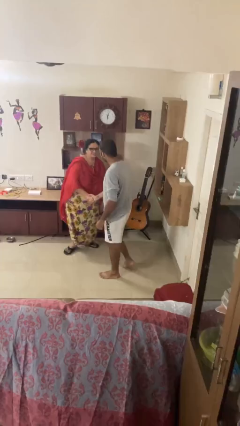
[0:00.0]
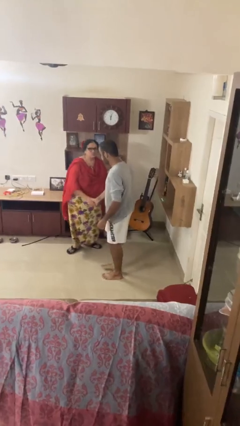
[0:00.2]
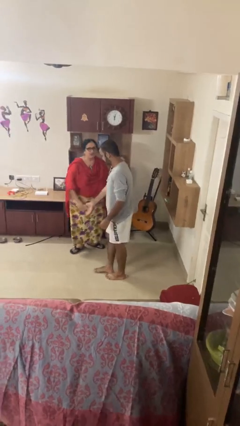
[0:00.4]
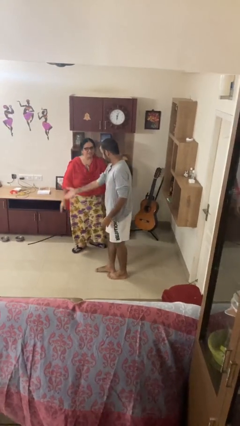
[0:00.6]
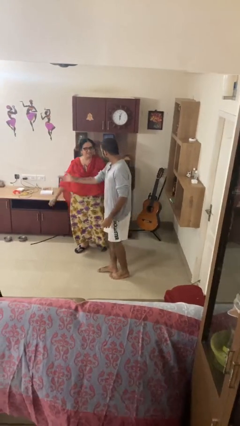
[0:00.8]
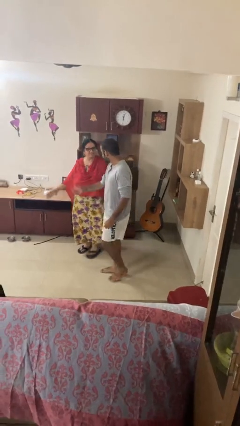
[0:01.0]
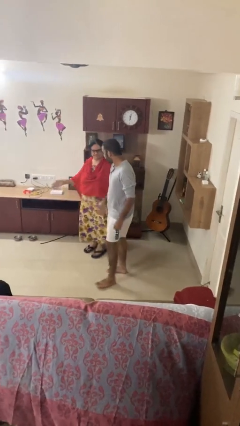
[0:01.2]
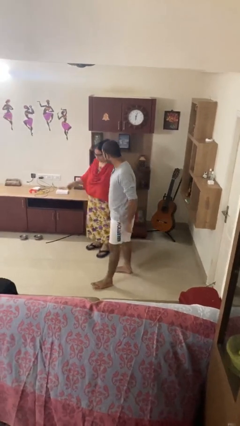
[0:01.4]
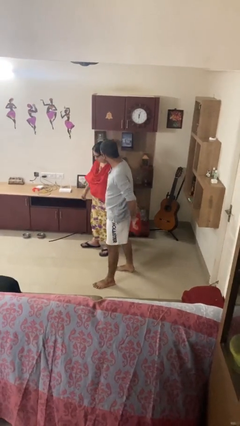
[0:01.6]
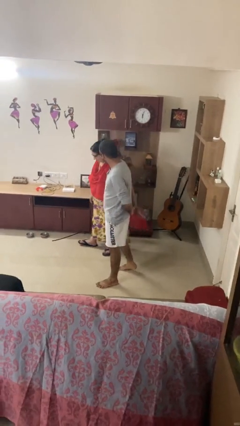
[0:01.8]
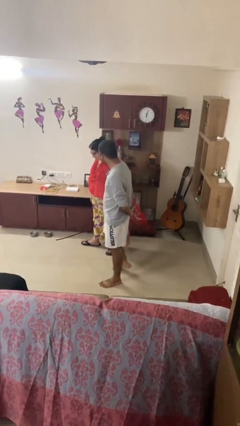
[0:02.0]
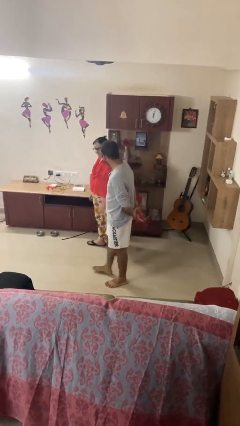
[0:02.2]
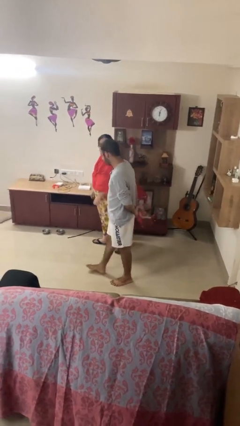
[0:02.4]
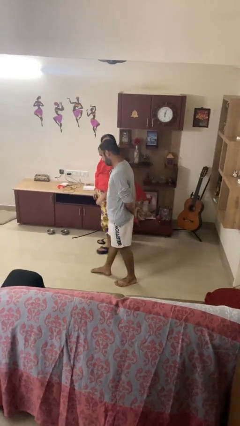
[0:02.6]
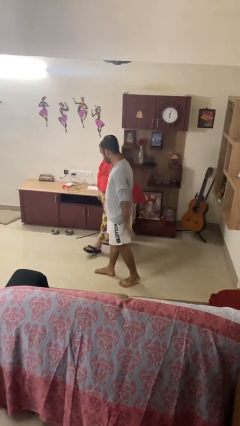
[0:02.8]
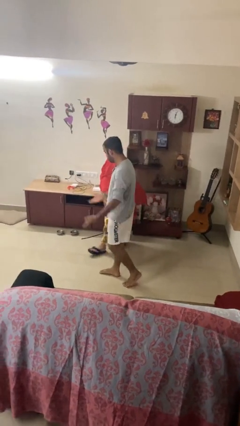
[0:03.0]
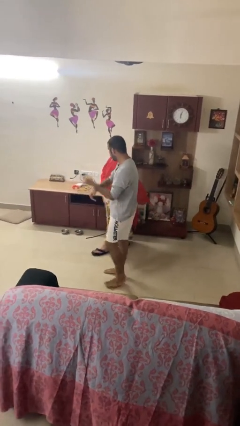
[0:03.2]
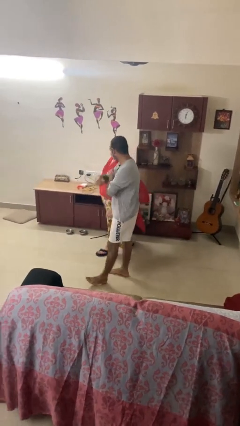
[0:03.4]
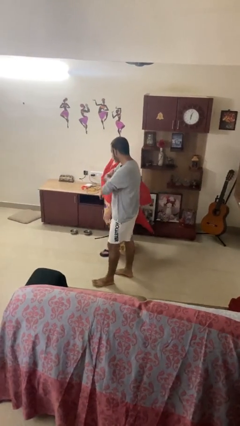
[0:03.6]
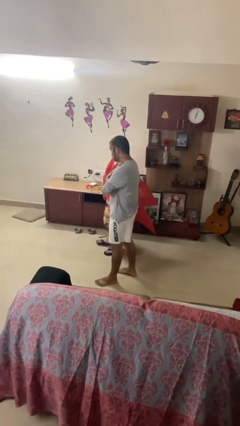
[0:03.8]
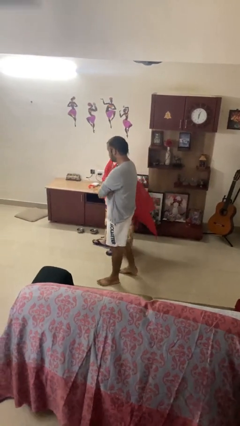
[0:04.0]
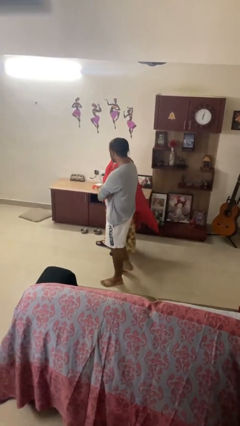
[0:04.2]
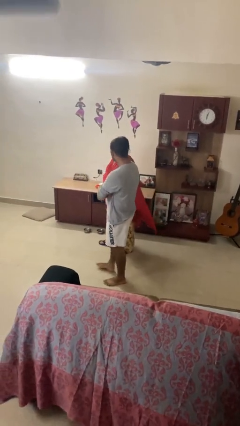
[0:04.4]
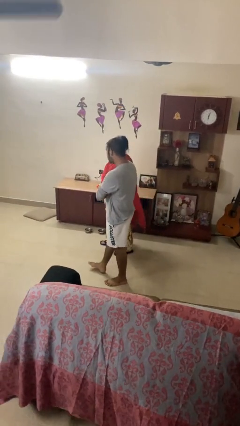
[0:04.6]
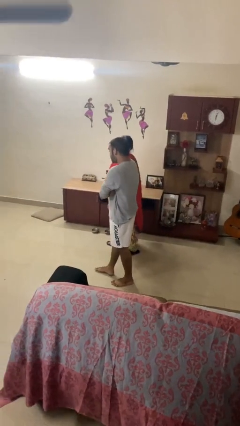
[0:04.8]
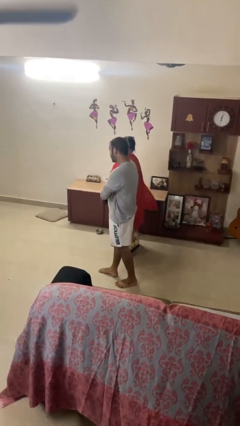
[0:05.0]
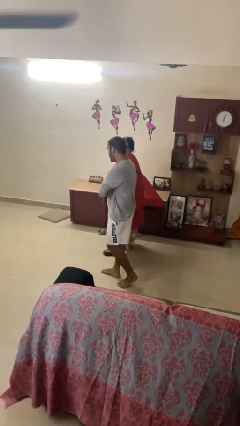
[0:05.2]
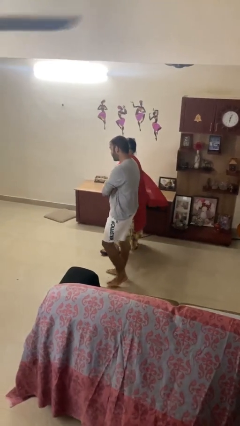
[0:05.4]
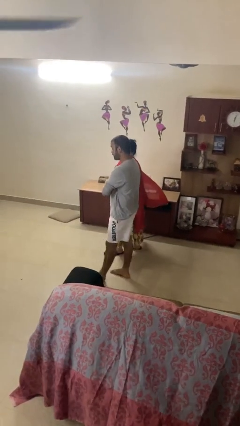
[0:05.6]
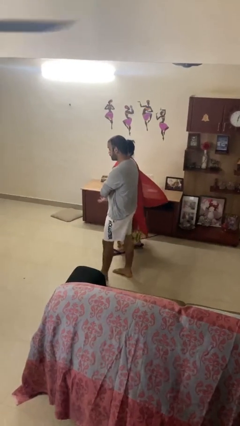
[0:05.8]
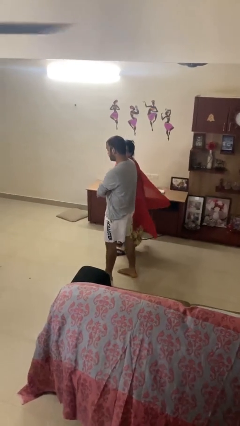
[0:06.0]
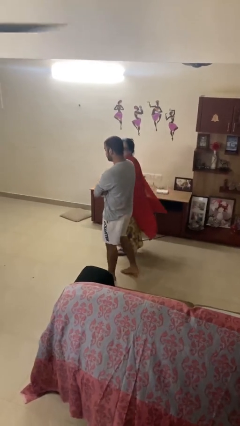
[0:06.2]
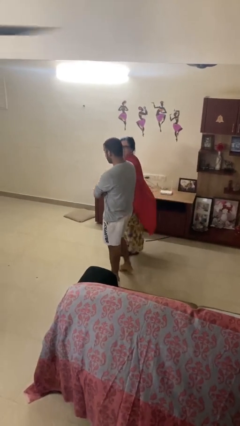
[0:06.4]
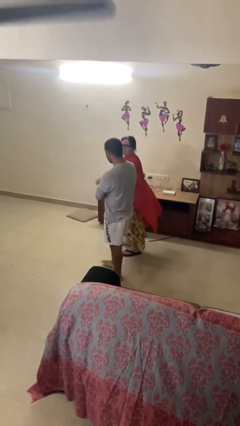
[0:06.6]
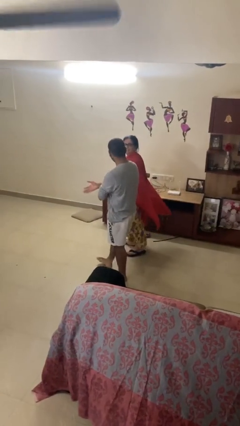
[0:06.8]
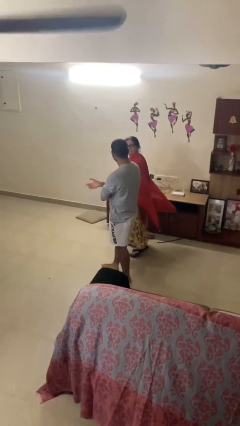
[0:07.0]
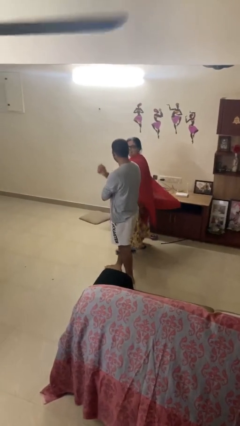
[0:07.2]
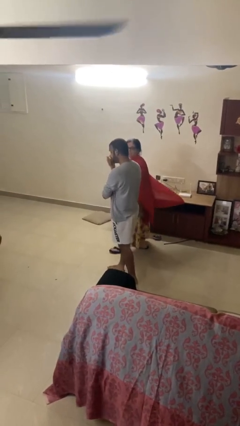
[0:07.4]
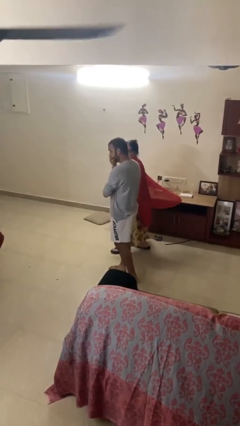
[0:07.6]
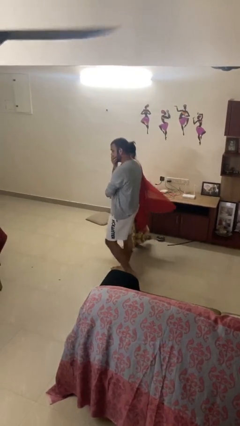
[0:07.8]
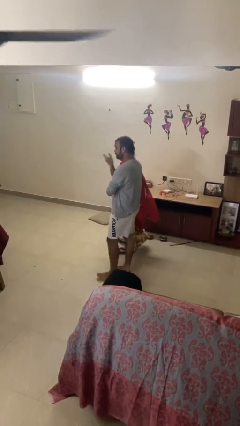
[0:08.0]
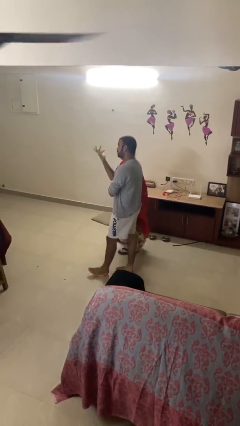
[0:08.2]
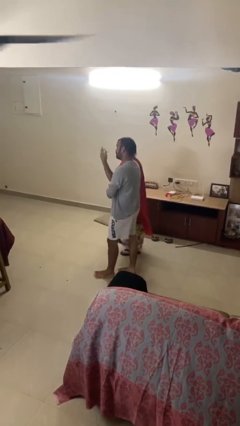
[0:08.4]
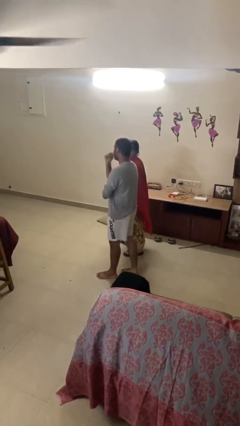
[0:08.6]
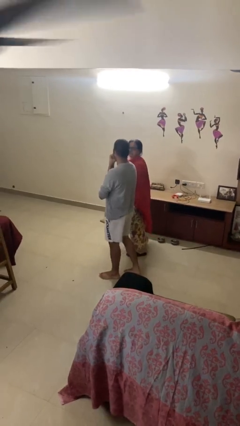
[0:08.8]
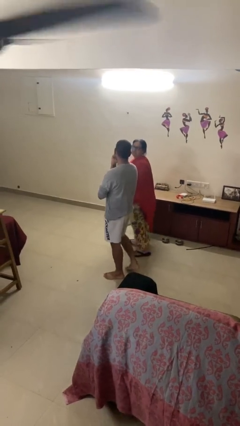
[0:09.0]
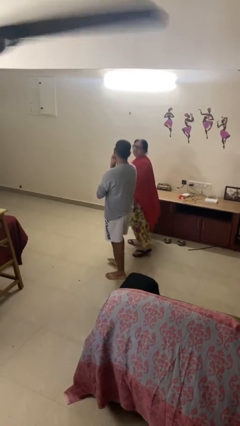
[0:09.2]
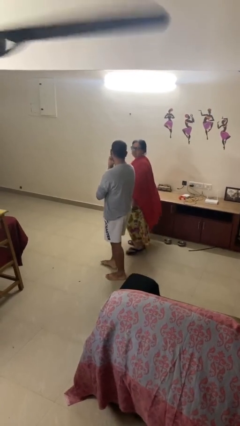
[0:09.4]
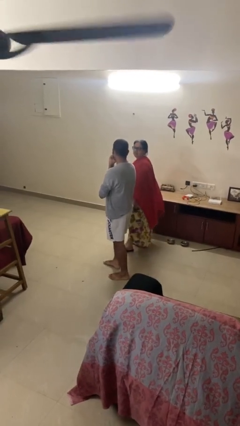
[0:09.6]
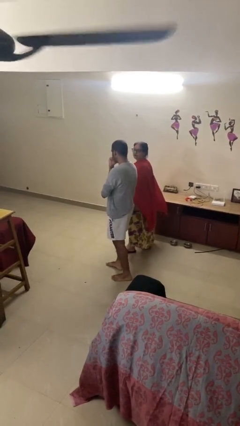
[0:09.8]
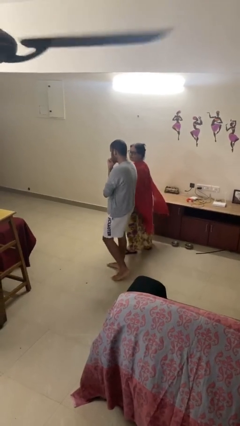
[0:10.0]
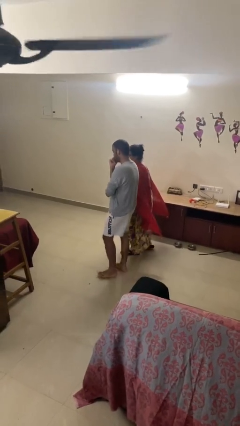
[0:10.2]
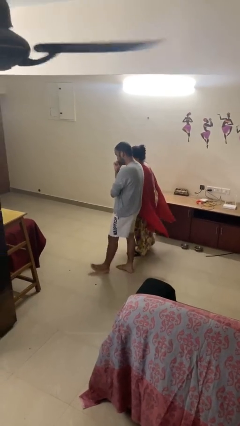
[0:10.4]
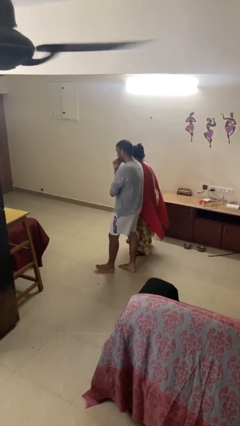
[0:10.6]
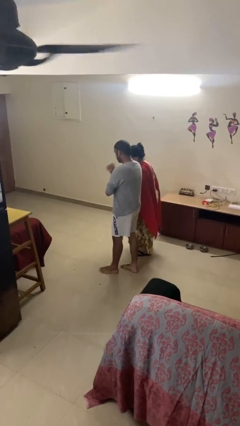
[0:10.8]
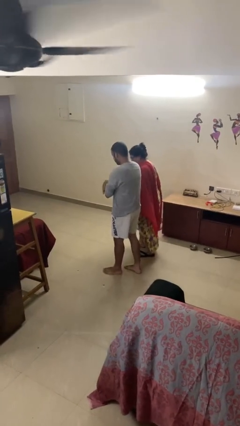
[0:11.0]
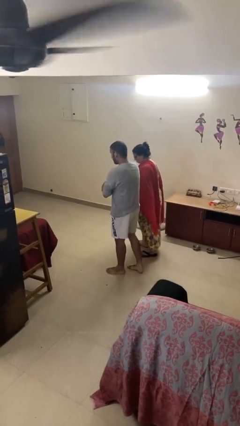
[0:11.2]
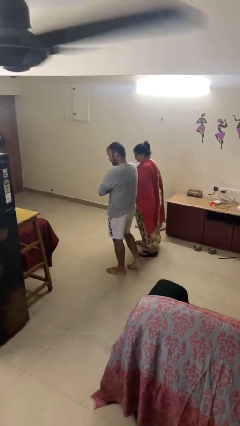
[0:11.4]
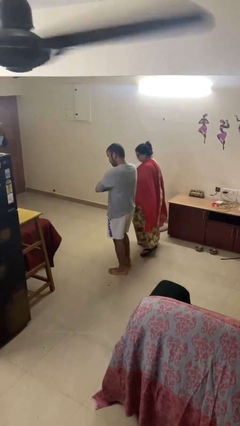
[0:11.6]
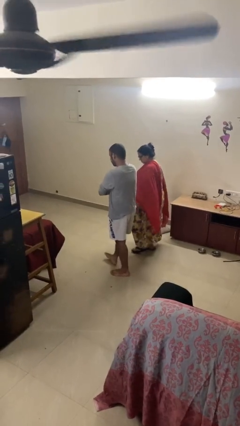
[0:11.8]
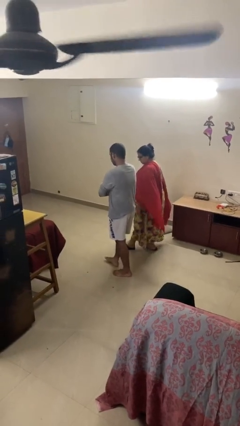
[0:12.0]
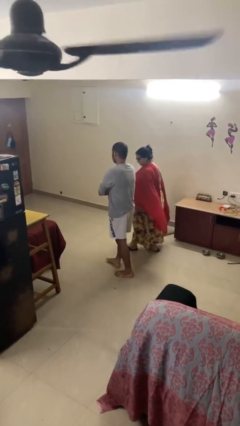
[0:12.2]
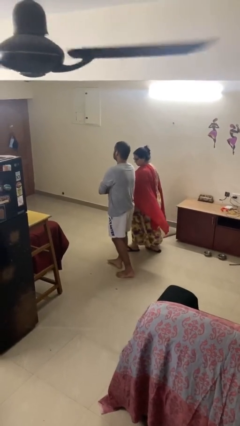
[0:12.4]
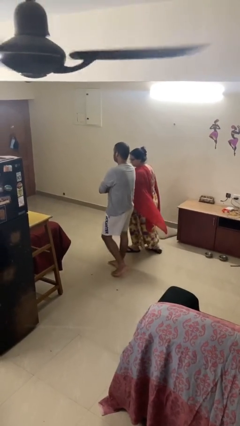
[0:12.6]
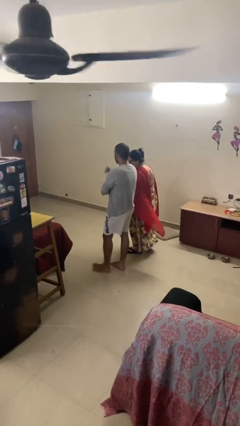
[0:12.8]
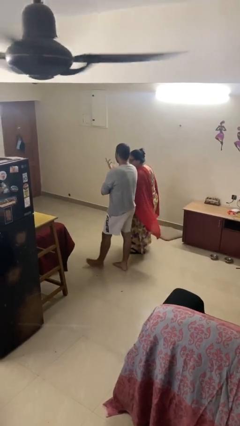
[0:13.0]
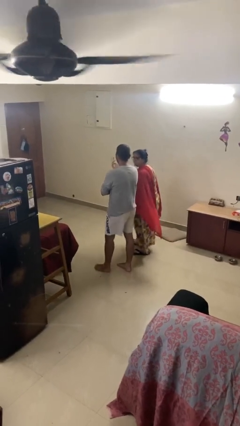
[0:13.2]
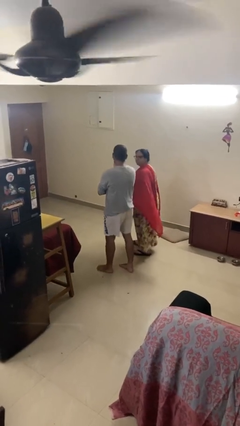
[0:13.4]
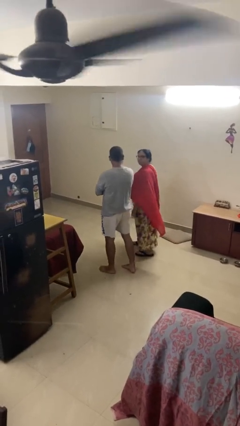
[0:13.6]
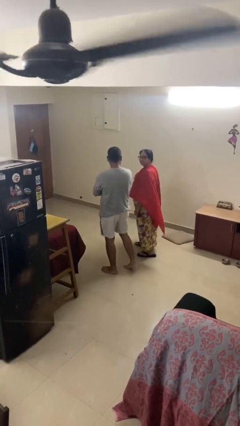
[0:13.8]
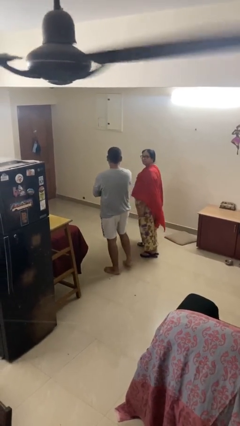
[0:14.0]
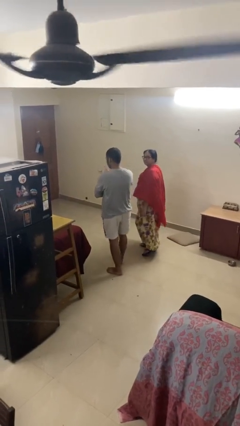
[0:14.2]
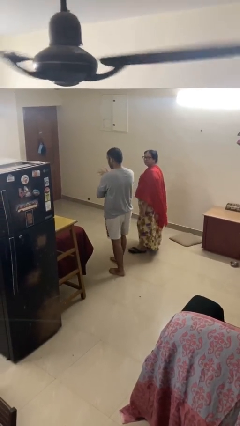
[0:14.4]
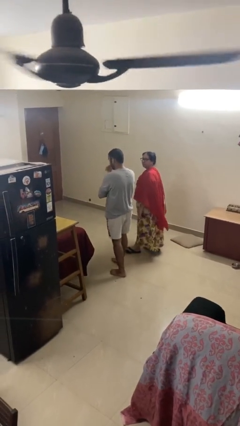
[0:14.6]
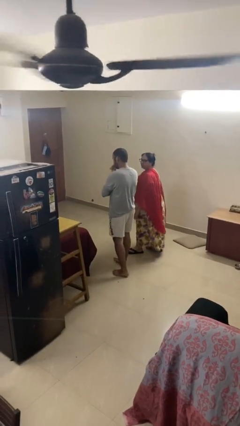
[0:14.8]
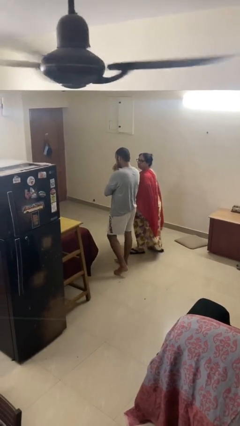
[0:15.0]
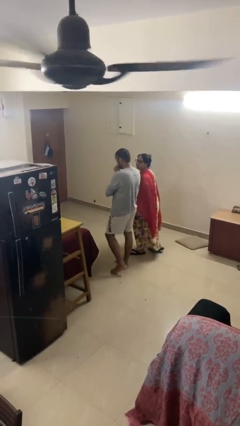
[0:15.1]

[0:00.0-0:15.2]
person talks to person

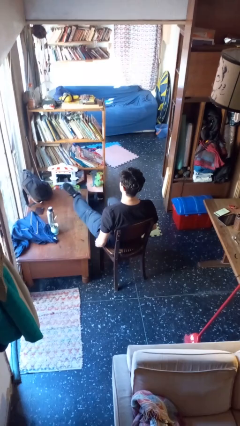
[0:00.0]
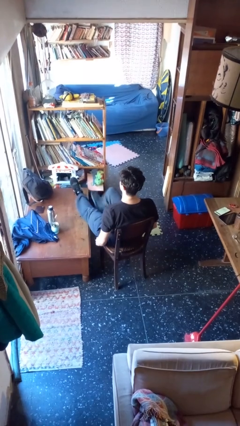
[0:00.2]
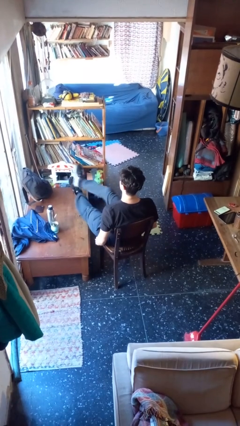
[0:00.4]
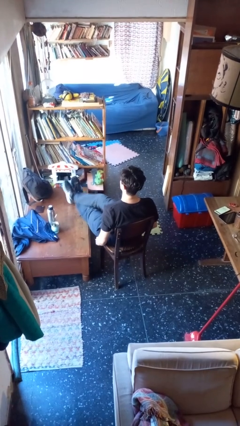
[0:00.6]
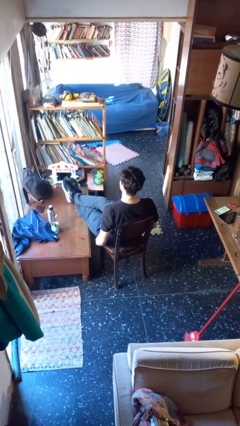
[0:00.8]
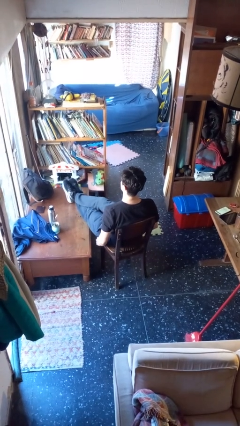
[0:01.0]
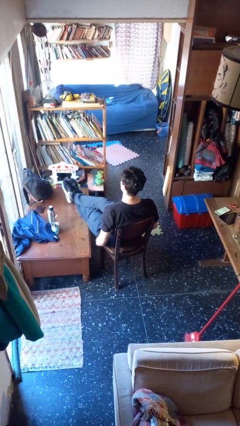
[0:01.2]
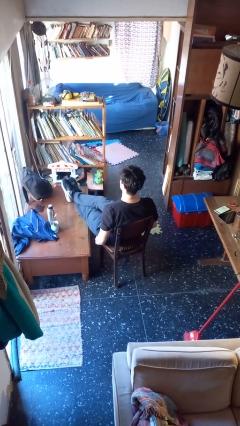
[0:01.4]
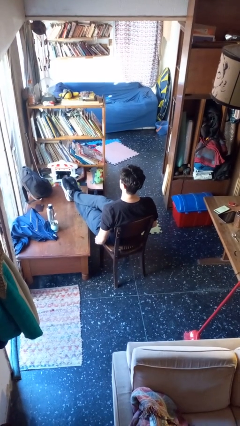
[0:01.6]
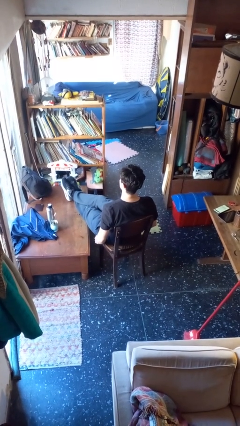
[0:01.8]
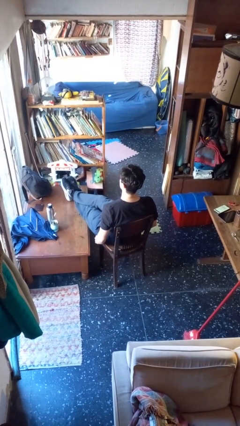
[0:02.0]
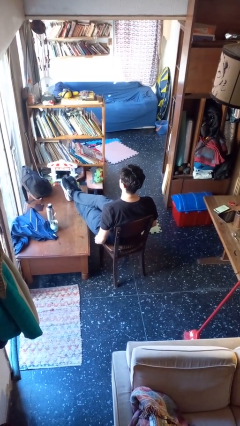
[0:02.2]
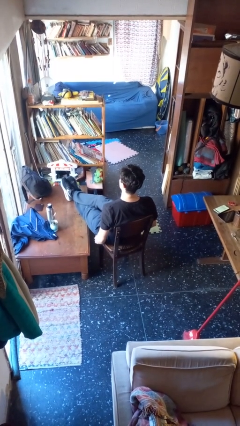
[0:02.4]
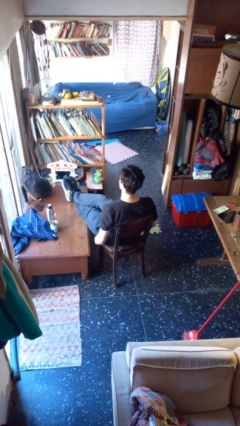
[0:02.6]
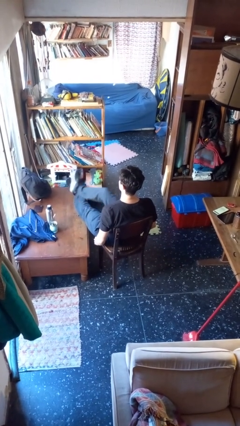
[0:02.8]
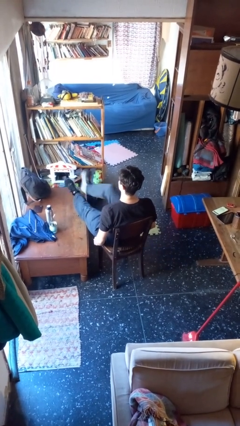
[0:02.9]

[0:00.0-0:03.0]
person puts feet up

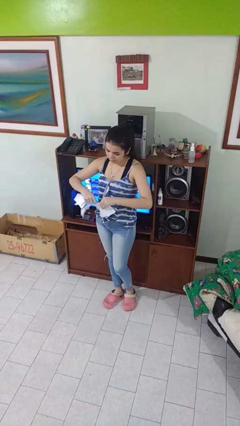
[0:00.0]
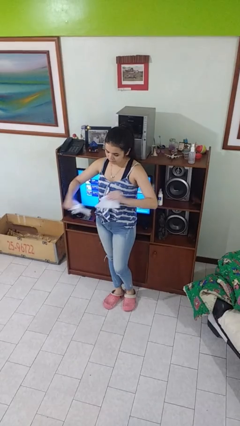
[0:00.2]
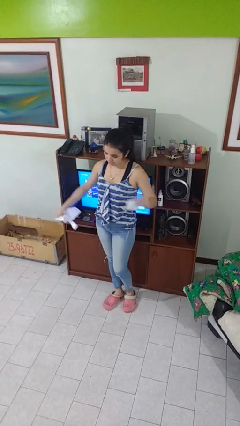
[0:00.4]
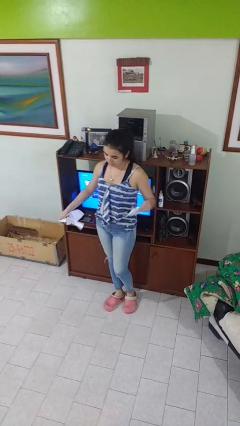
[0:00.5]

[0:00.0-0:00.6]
person tears paper
